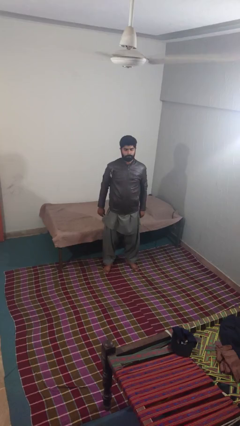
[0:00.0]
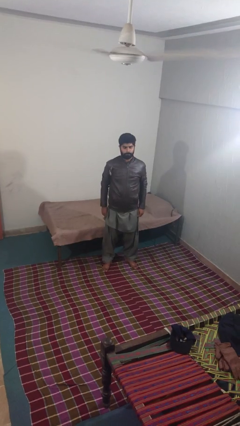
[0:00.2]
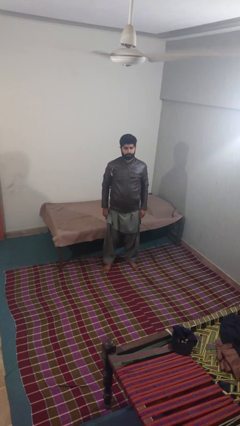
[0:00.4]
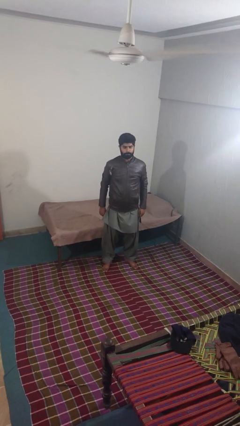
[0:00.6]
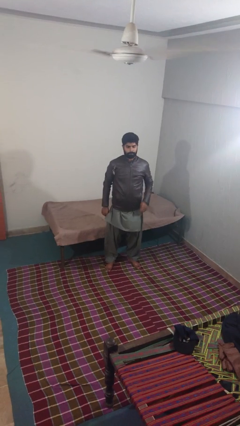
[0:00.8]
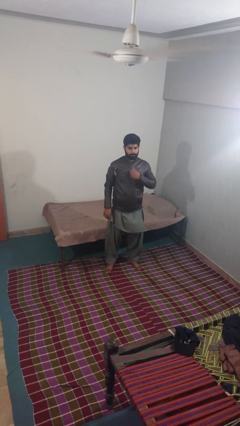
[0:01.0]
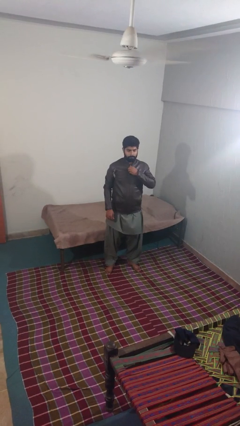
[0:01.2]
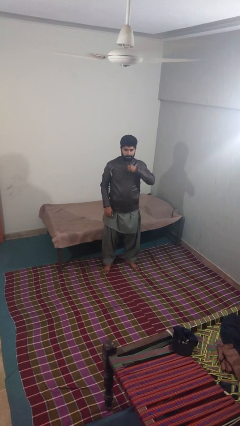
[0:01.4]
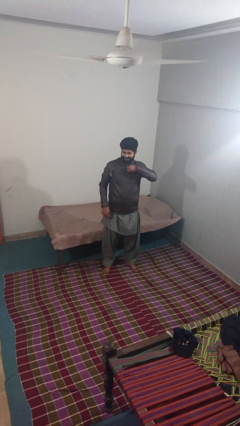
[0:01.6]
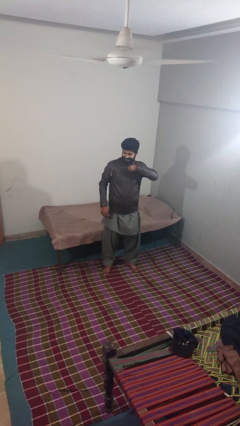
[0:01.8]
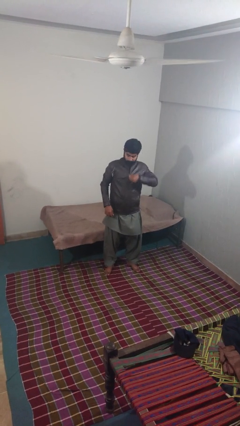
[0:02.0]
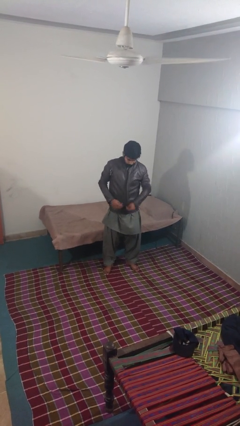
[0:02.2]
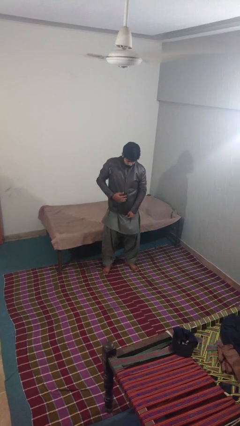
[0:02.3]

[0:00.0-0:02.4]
person unzips jacket

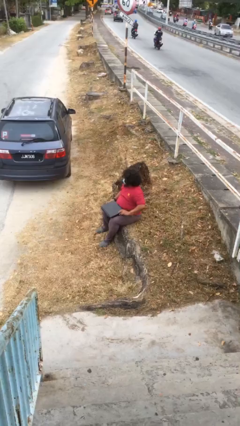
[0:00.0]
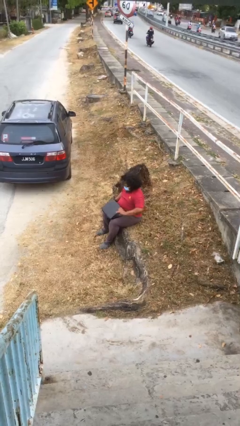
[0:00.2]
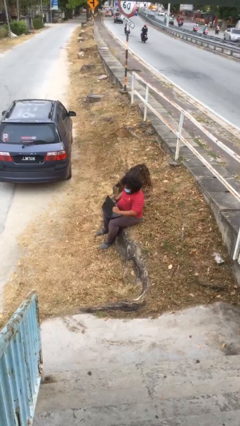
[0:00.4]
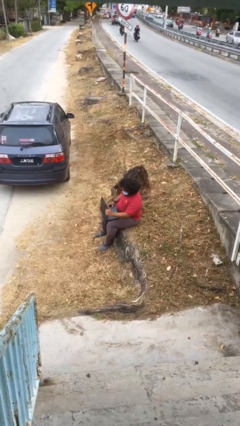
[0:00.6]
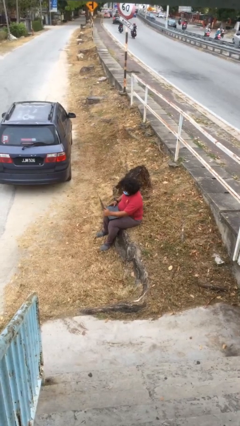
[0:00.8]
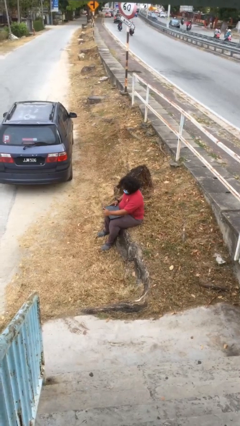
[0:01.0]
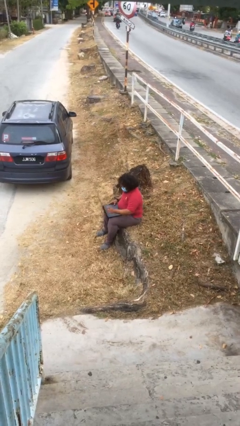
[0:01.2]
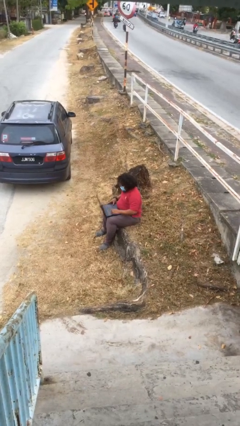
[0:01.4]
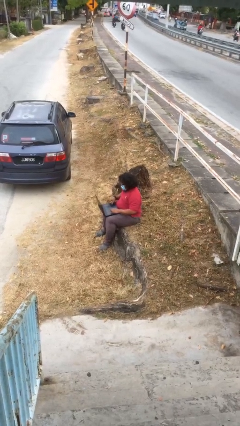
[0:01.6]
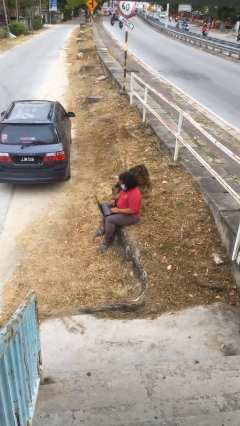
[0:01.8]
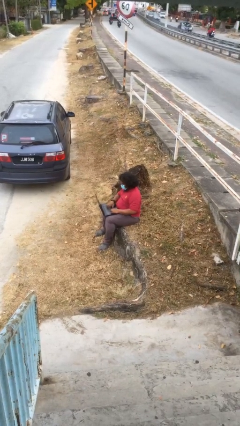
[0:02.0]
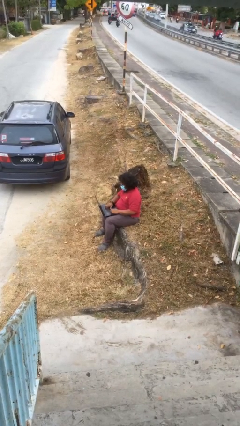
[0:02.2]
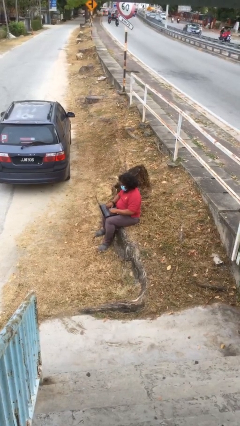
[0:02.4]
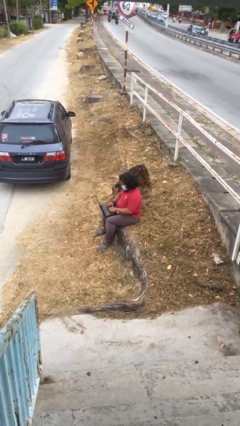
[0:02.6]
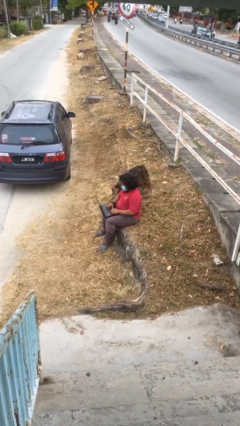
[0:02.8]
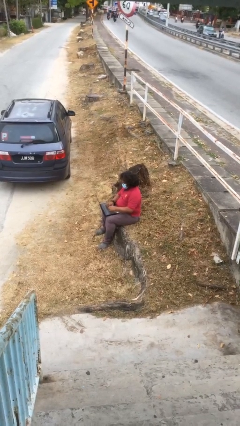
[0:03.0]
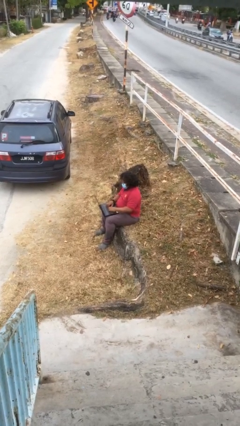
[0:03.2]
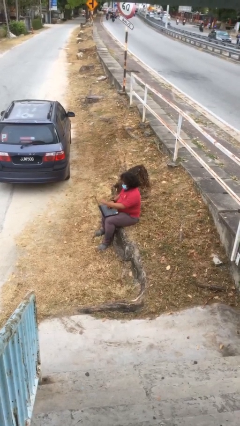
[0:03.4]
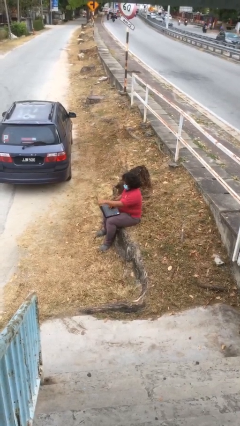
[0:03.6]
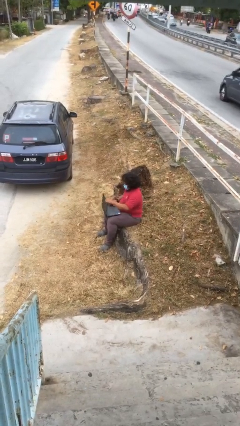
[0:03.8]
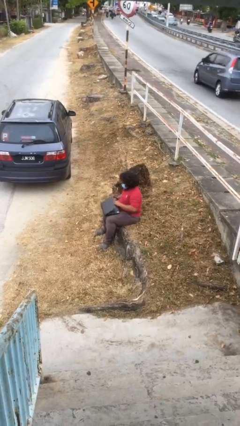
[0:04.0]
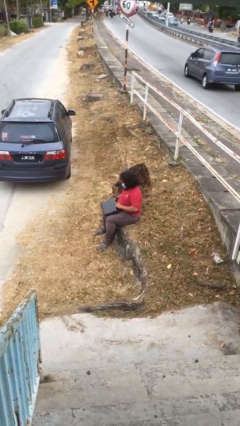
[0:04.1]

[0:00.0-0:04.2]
person interacts with laptop

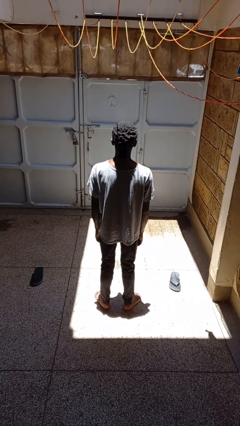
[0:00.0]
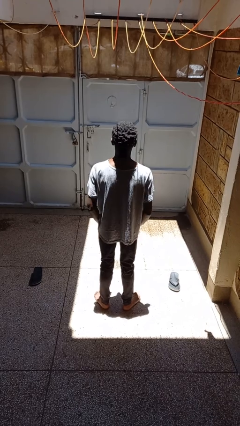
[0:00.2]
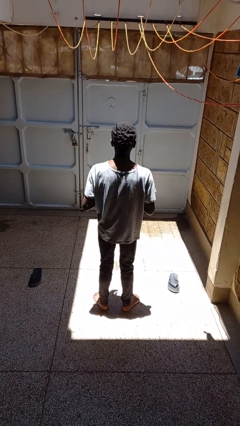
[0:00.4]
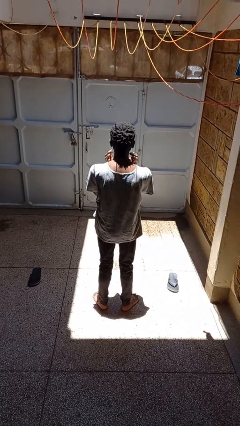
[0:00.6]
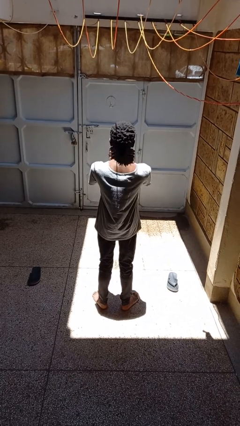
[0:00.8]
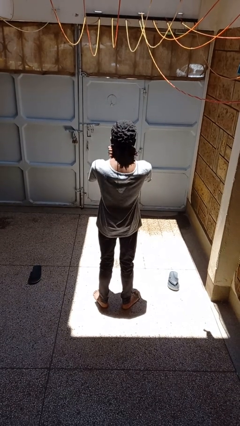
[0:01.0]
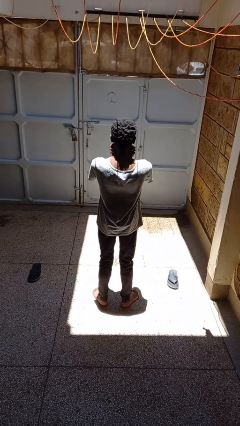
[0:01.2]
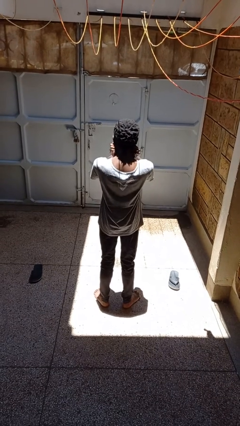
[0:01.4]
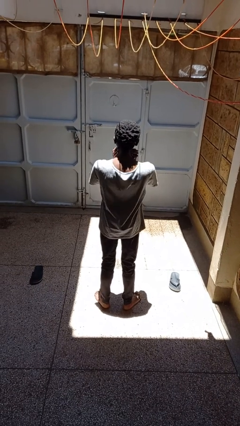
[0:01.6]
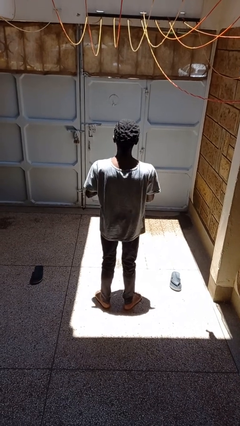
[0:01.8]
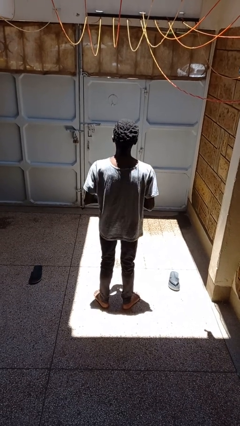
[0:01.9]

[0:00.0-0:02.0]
person rubs neck

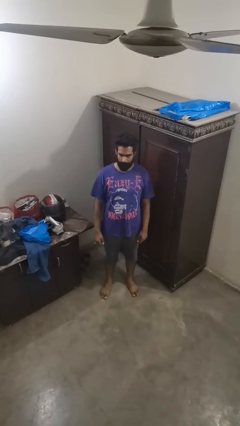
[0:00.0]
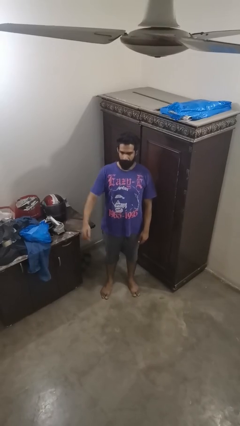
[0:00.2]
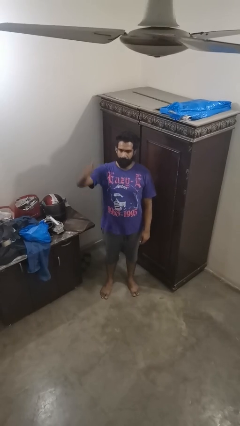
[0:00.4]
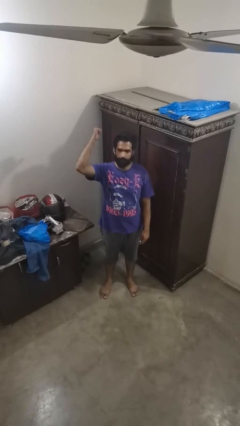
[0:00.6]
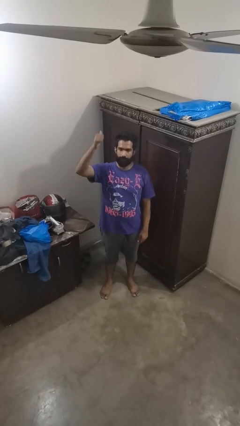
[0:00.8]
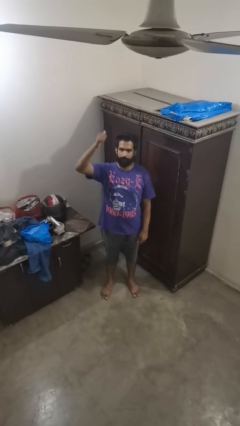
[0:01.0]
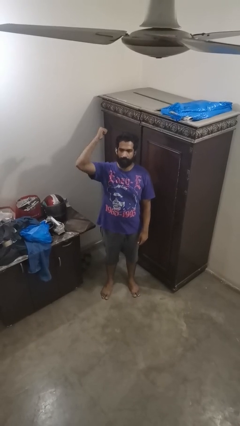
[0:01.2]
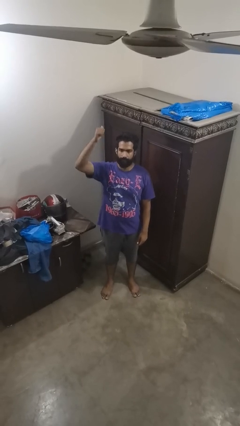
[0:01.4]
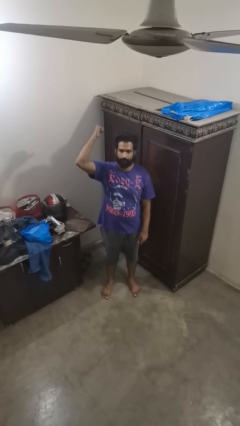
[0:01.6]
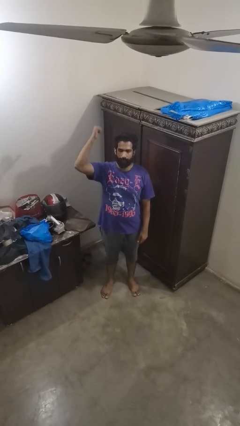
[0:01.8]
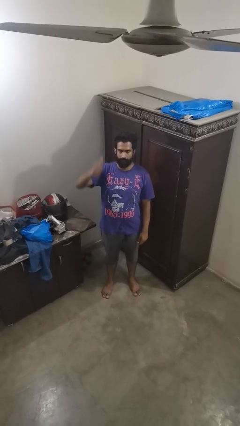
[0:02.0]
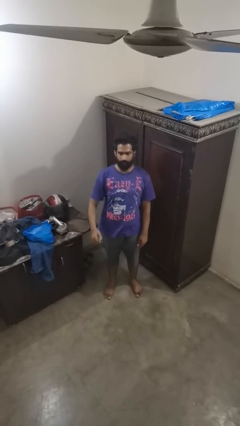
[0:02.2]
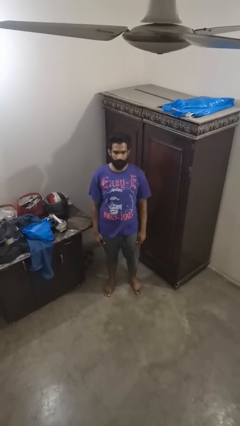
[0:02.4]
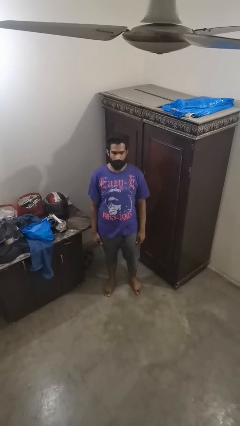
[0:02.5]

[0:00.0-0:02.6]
person gestures behind me

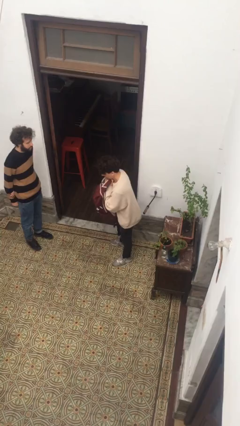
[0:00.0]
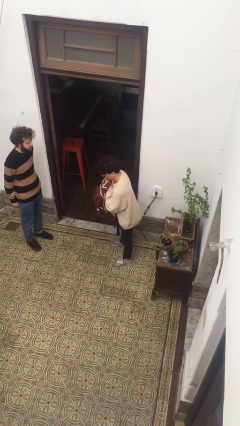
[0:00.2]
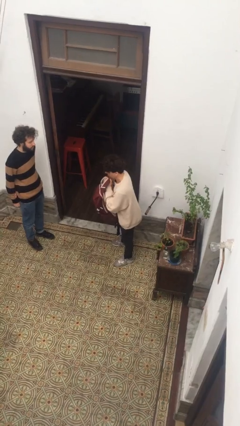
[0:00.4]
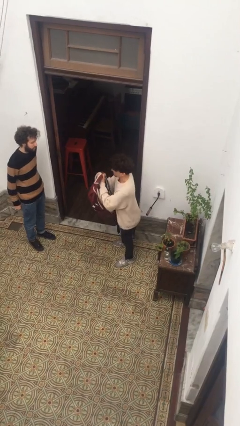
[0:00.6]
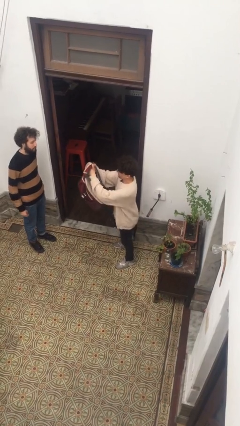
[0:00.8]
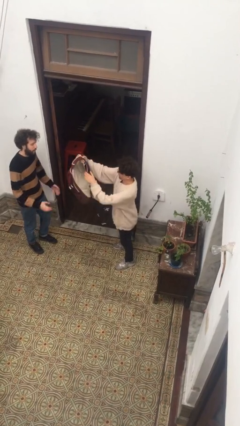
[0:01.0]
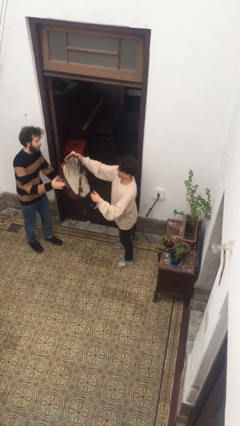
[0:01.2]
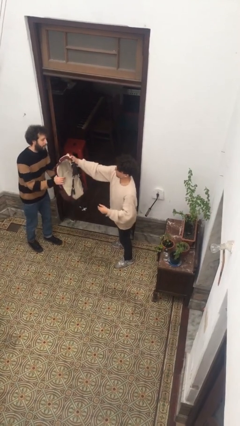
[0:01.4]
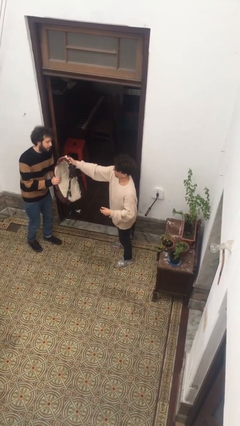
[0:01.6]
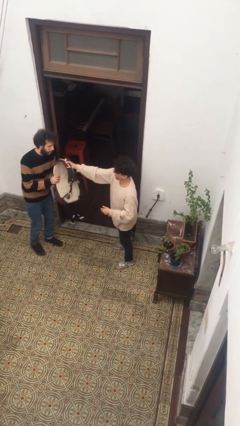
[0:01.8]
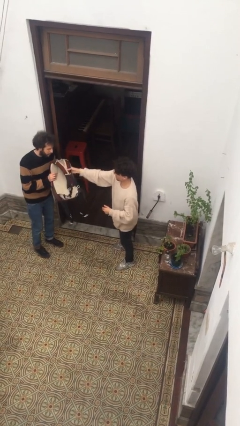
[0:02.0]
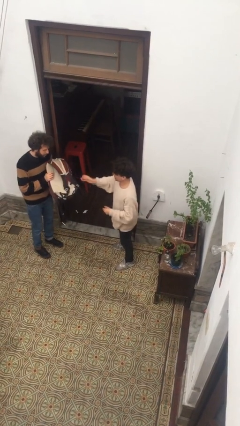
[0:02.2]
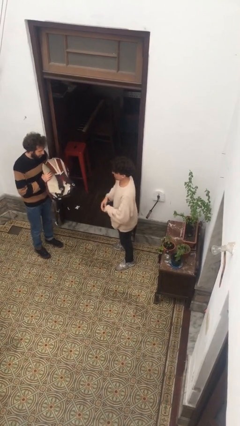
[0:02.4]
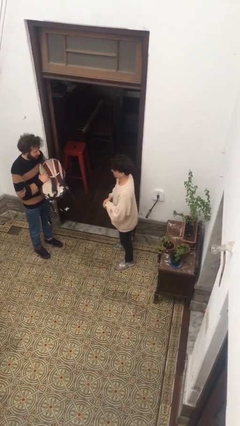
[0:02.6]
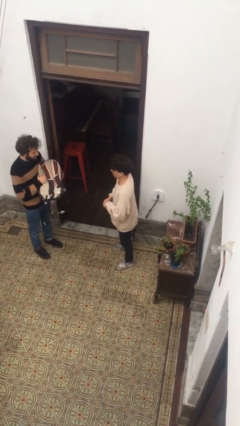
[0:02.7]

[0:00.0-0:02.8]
person transfers object to person

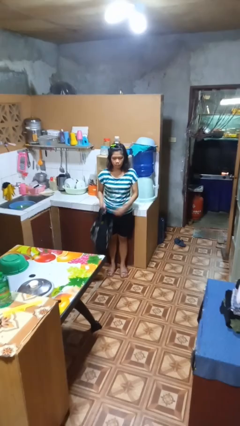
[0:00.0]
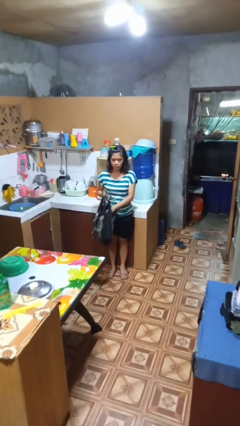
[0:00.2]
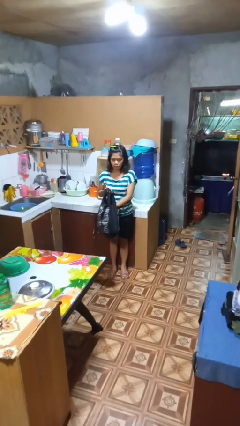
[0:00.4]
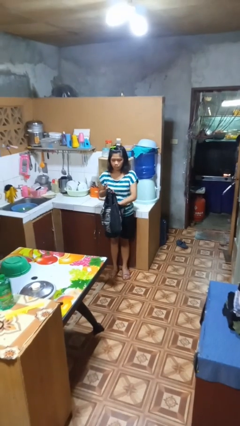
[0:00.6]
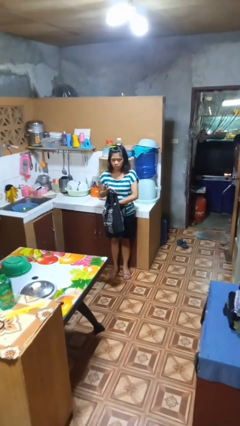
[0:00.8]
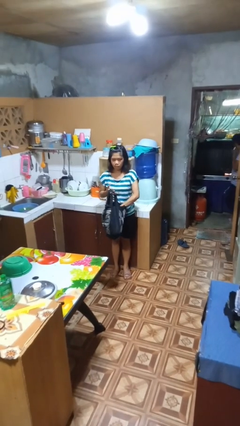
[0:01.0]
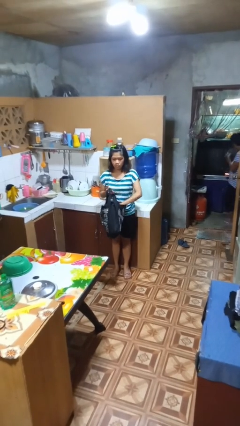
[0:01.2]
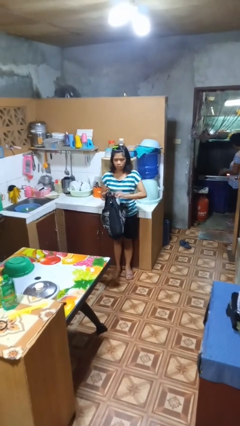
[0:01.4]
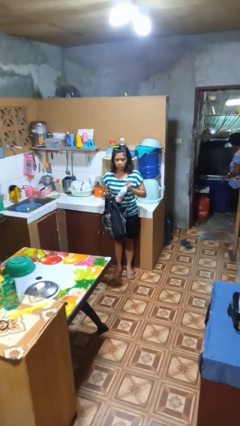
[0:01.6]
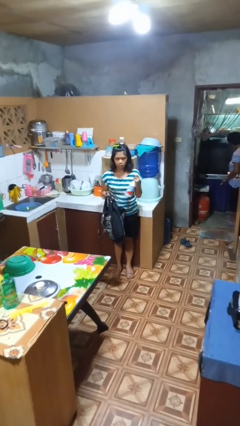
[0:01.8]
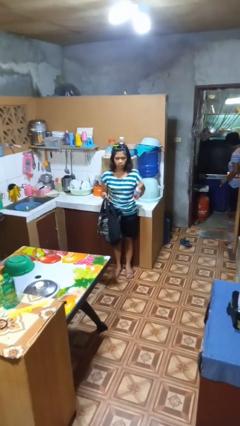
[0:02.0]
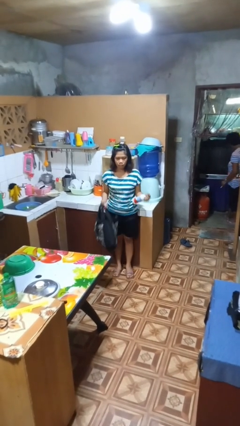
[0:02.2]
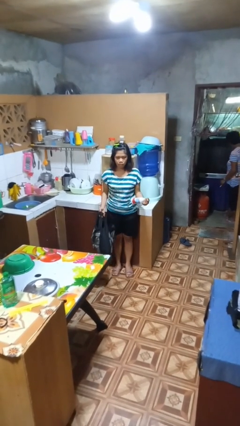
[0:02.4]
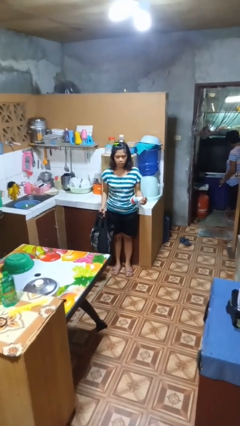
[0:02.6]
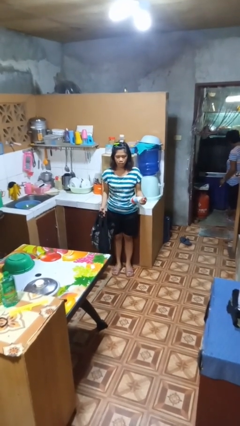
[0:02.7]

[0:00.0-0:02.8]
person takes object from bag

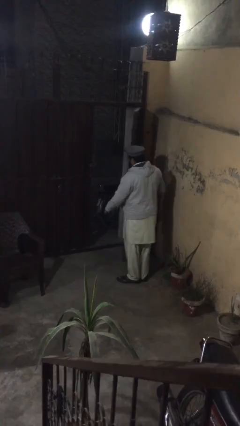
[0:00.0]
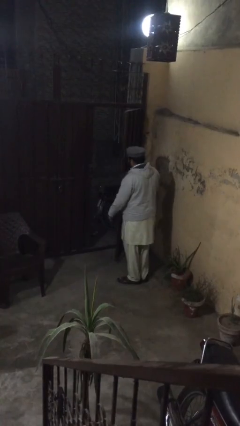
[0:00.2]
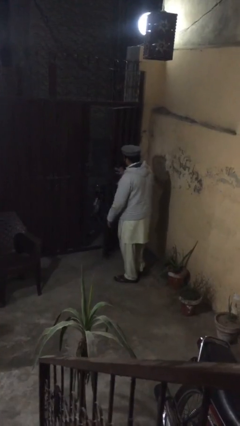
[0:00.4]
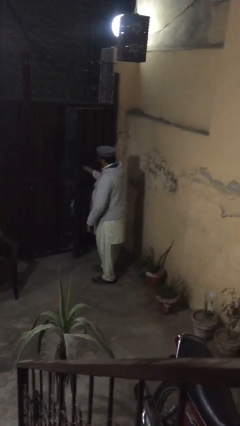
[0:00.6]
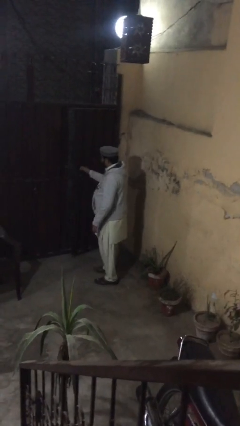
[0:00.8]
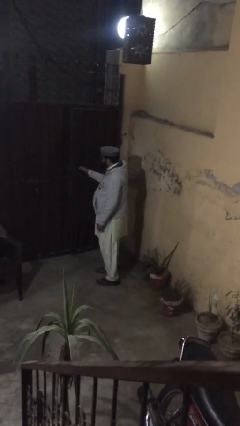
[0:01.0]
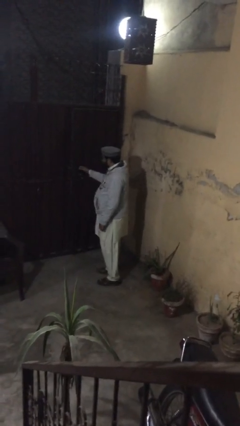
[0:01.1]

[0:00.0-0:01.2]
person closes facility door
